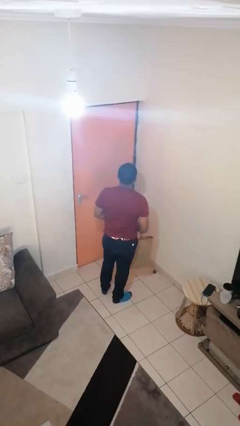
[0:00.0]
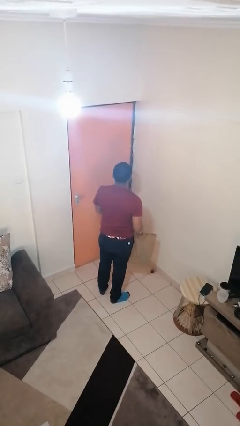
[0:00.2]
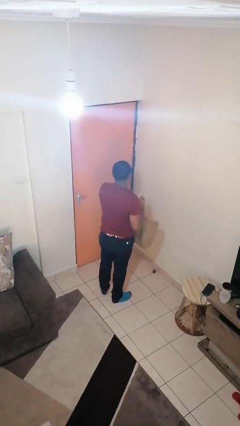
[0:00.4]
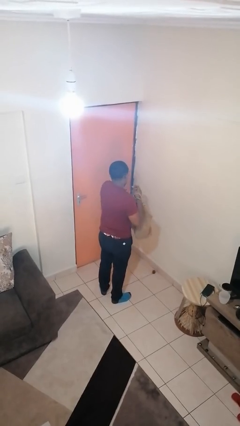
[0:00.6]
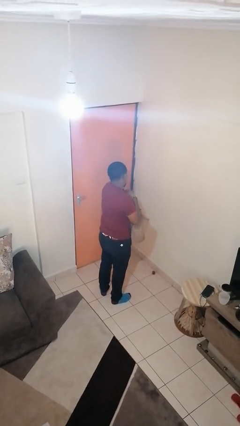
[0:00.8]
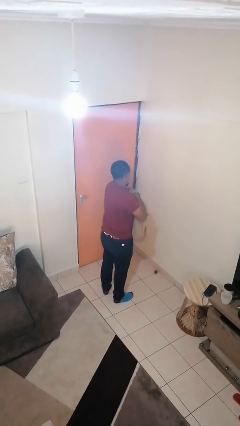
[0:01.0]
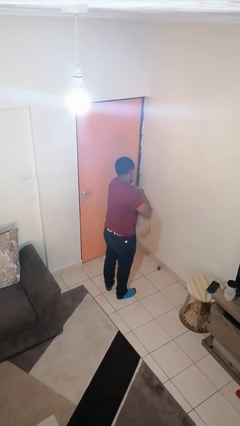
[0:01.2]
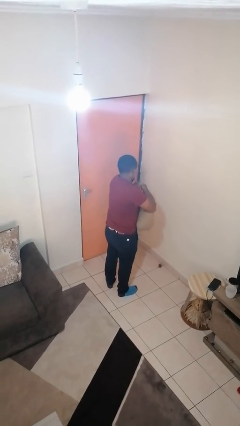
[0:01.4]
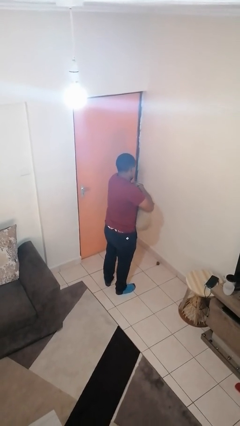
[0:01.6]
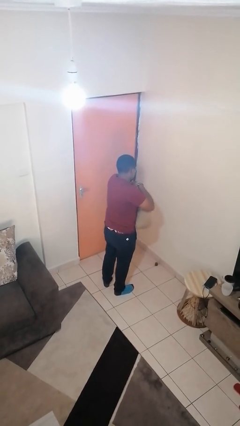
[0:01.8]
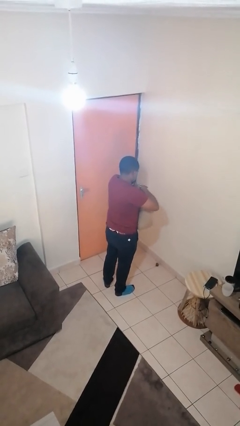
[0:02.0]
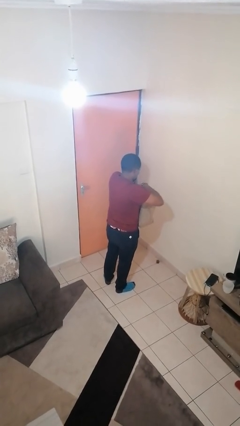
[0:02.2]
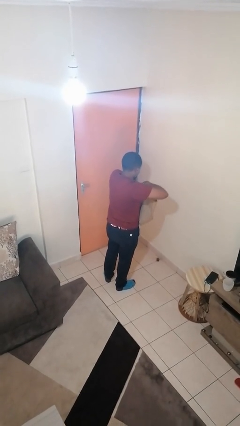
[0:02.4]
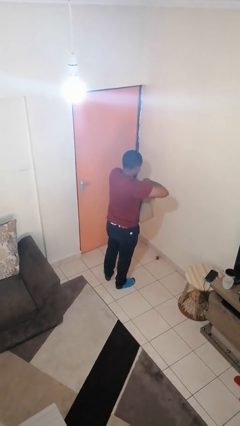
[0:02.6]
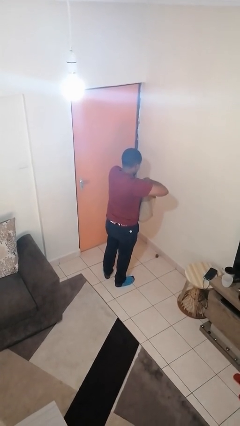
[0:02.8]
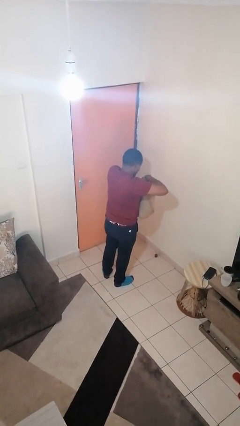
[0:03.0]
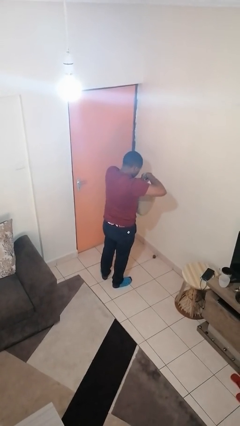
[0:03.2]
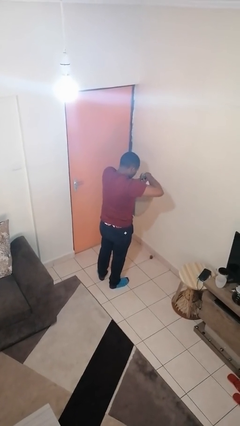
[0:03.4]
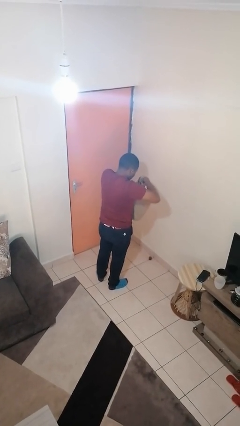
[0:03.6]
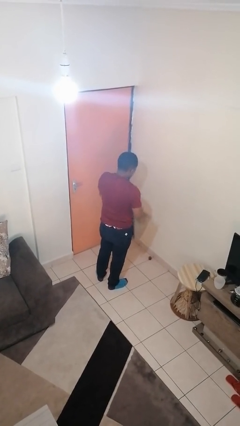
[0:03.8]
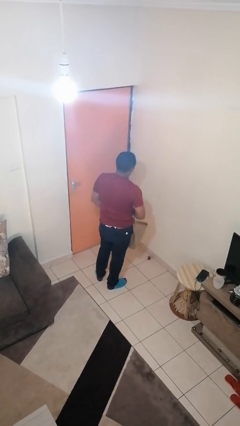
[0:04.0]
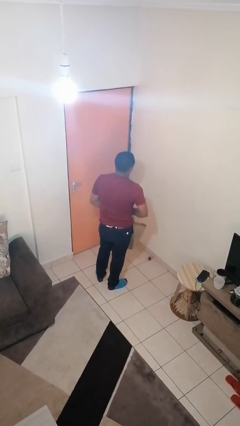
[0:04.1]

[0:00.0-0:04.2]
person searches in bag

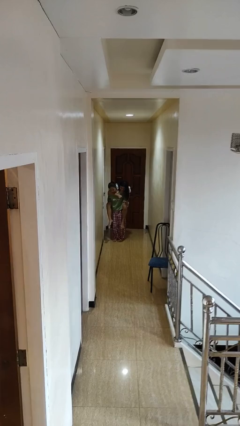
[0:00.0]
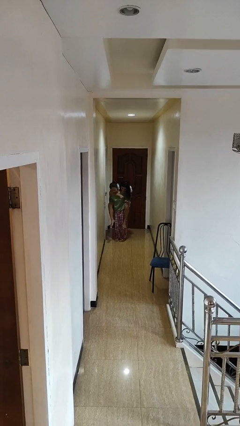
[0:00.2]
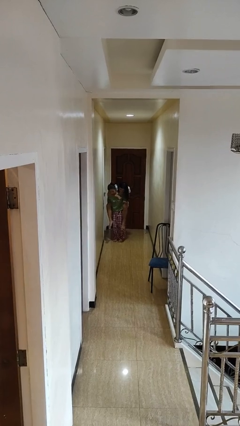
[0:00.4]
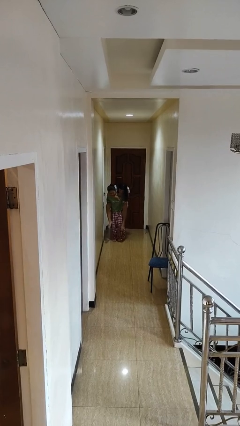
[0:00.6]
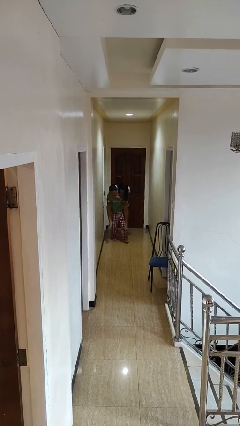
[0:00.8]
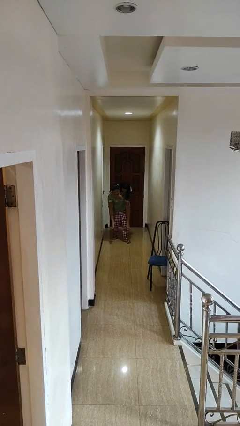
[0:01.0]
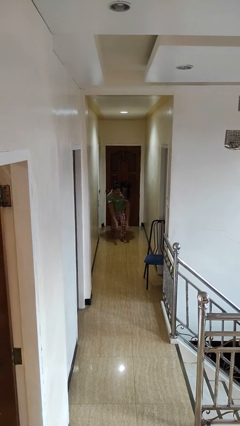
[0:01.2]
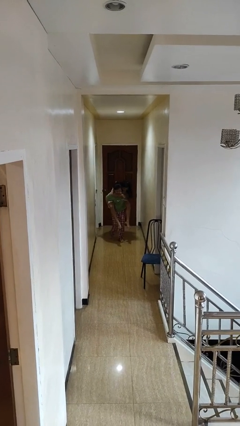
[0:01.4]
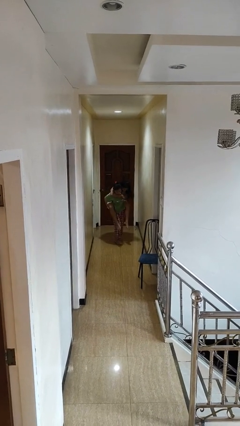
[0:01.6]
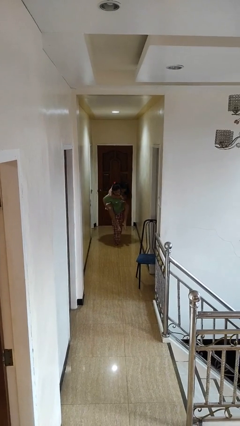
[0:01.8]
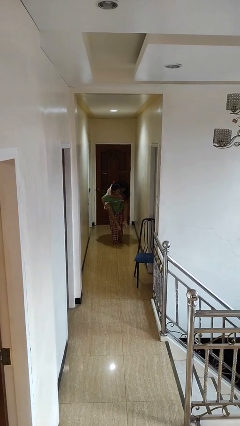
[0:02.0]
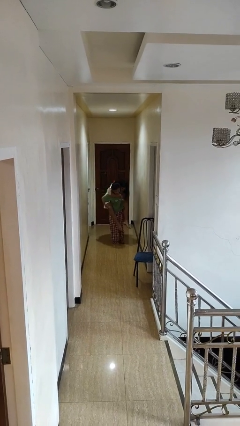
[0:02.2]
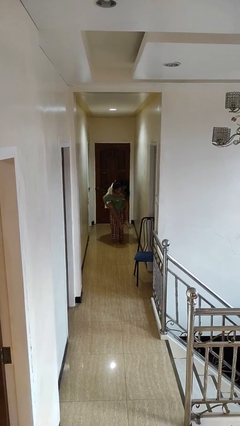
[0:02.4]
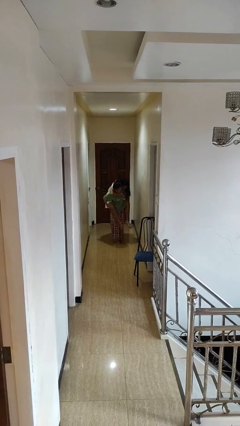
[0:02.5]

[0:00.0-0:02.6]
person carries person on back

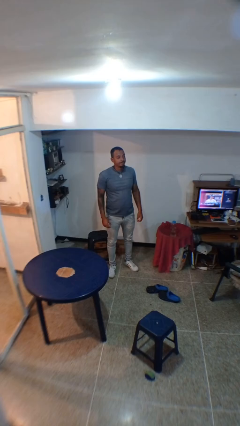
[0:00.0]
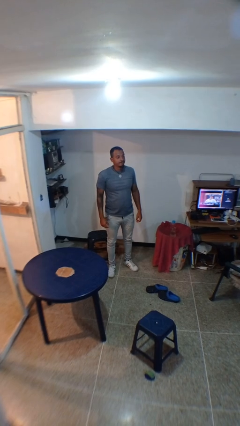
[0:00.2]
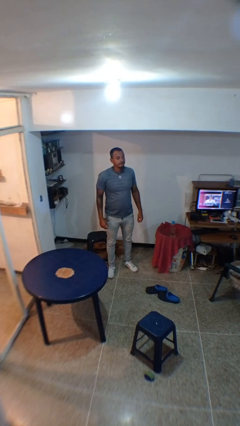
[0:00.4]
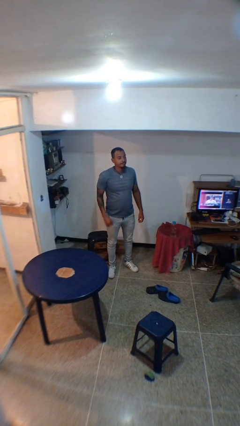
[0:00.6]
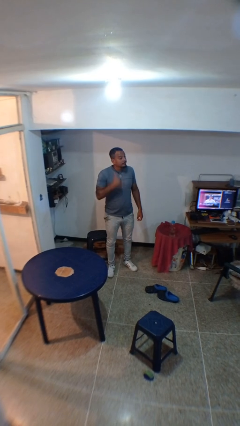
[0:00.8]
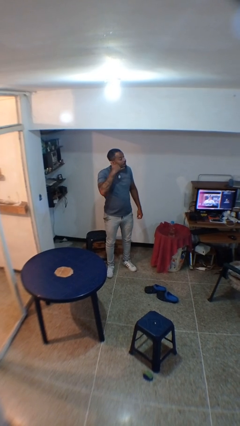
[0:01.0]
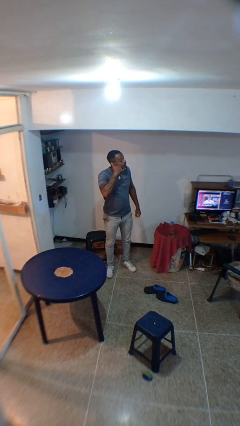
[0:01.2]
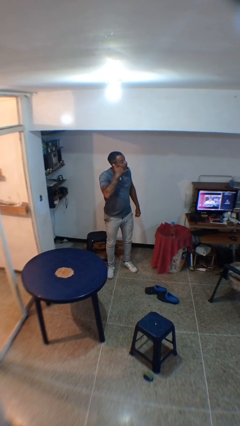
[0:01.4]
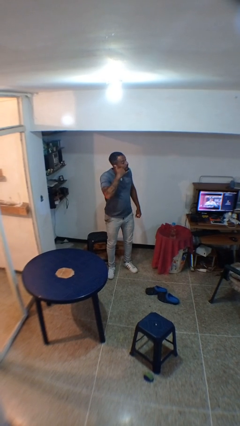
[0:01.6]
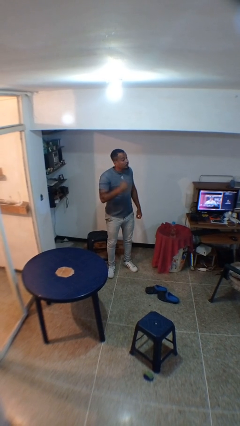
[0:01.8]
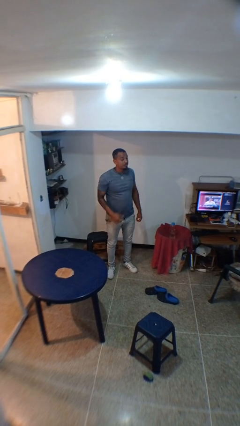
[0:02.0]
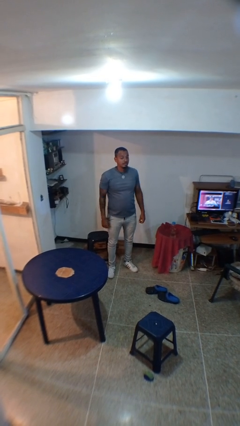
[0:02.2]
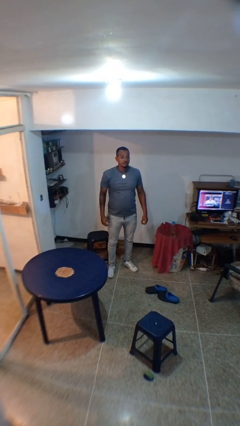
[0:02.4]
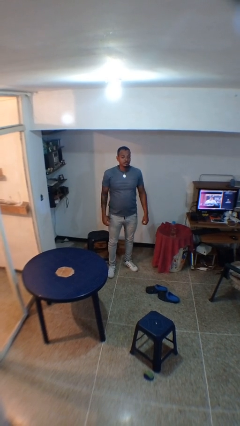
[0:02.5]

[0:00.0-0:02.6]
person gestures call me

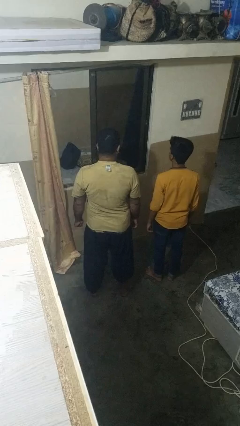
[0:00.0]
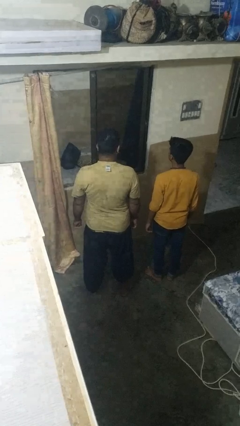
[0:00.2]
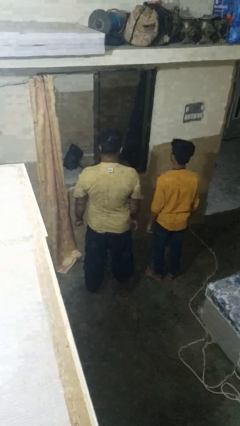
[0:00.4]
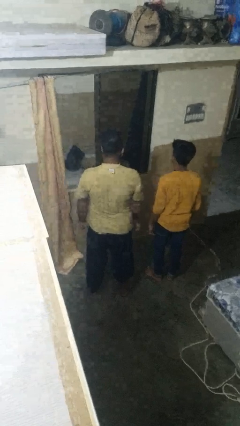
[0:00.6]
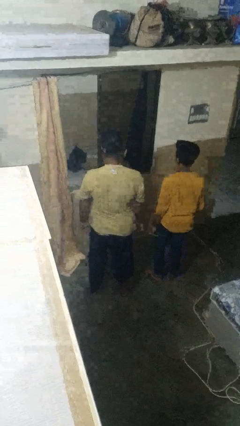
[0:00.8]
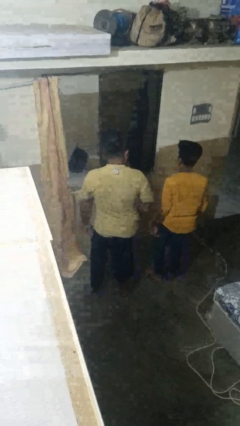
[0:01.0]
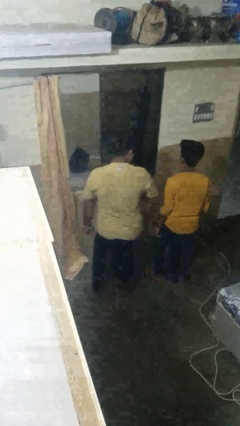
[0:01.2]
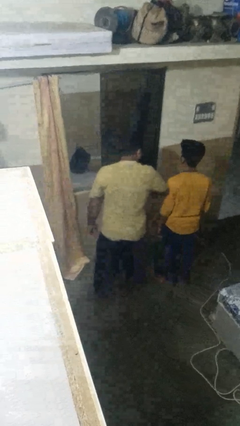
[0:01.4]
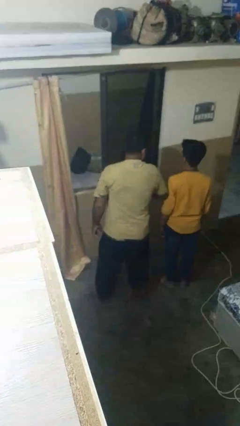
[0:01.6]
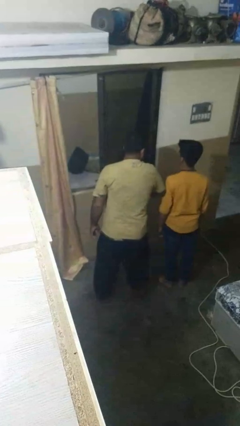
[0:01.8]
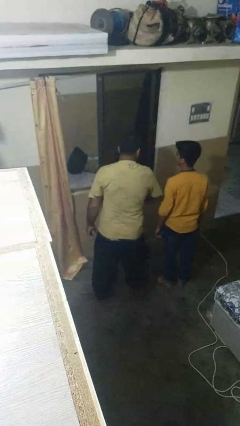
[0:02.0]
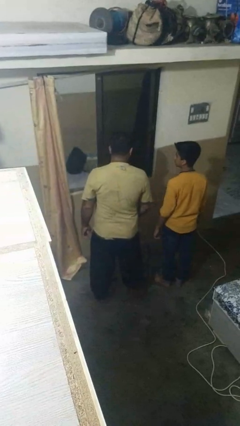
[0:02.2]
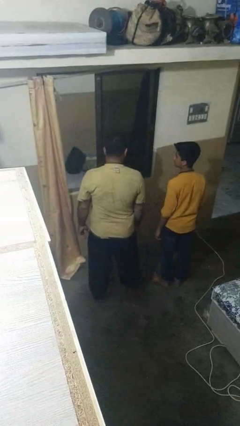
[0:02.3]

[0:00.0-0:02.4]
person nudges person with elbow

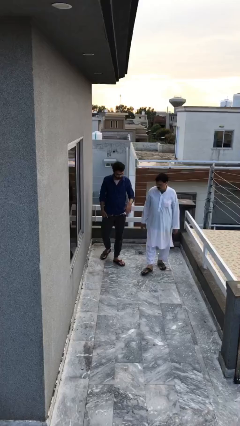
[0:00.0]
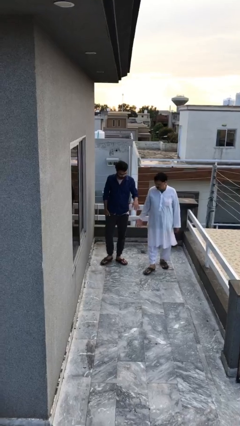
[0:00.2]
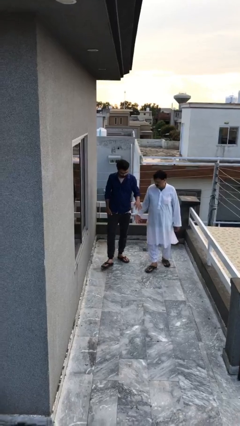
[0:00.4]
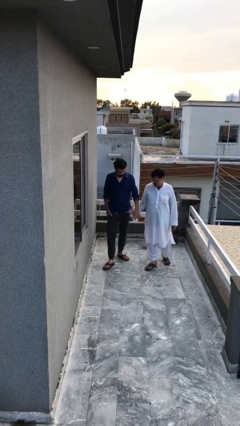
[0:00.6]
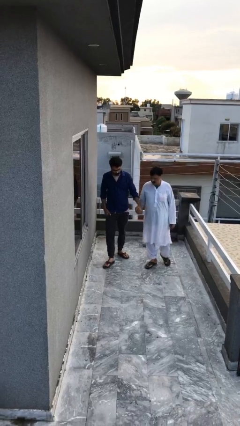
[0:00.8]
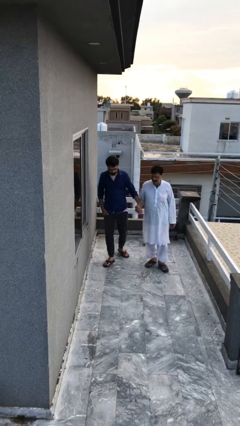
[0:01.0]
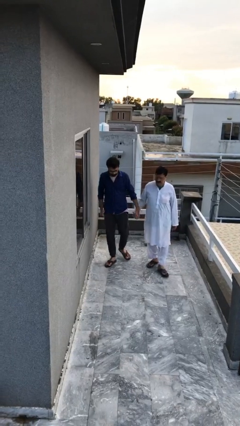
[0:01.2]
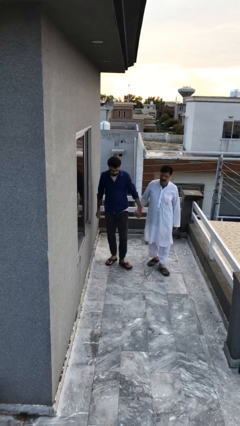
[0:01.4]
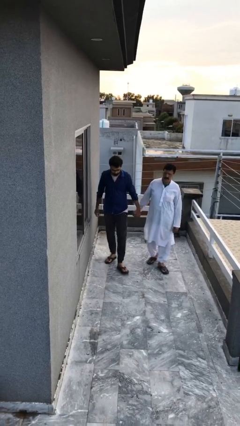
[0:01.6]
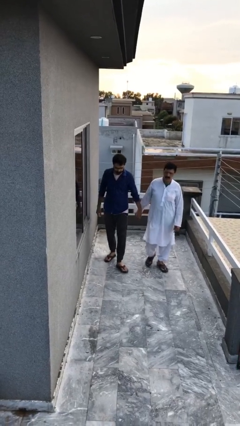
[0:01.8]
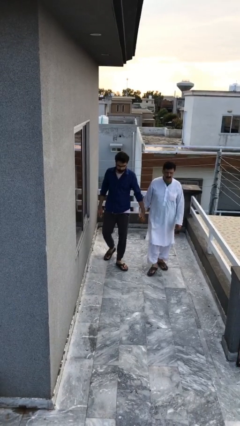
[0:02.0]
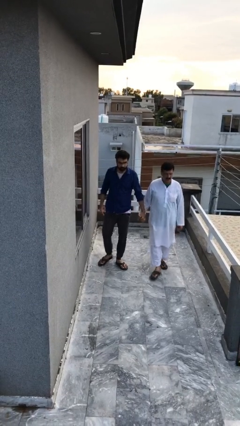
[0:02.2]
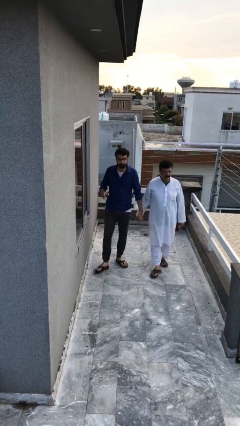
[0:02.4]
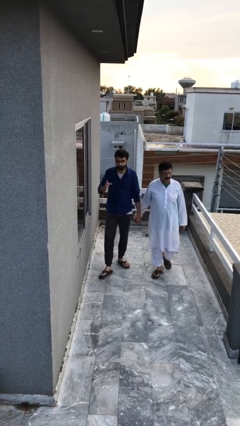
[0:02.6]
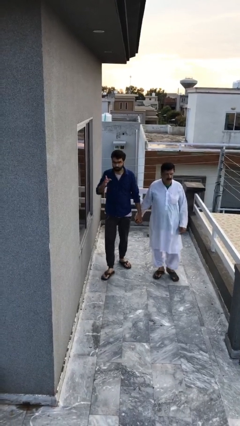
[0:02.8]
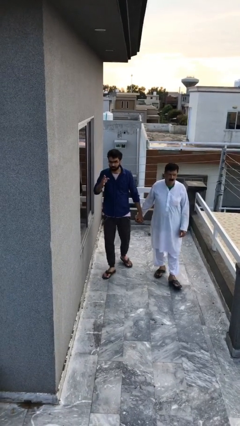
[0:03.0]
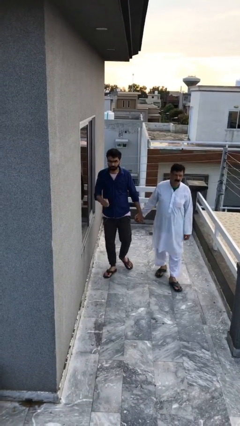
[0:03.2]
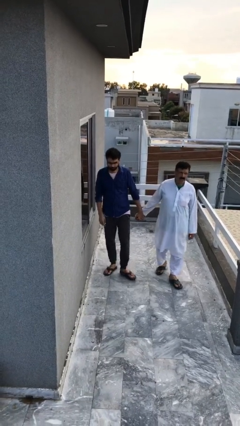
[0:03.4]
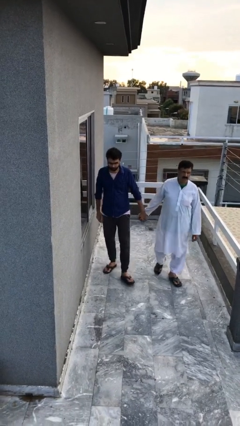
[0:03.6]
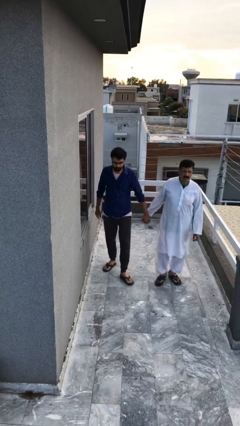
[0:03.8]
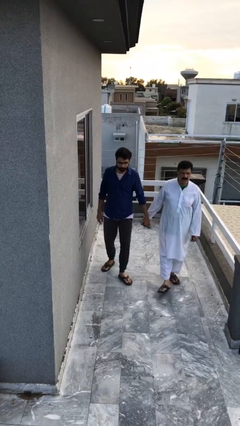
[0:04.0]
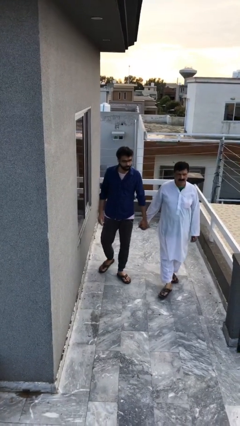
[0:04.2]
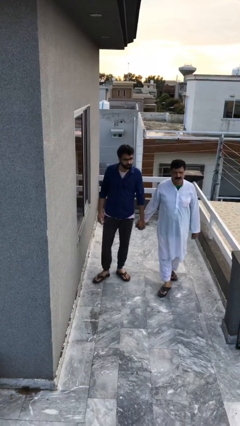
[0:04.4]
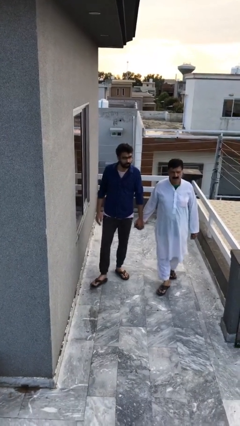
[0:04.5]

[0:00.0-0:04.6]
person holds hand

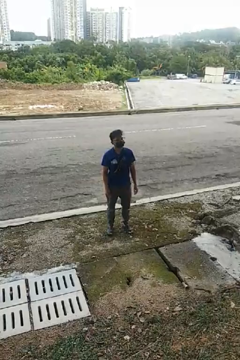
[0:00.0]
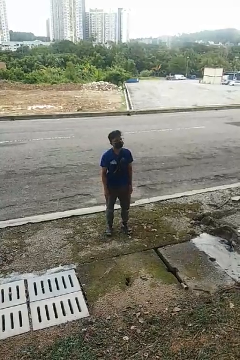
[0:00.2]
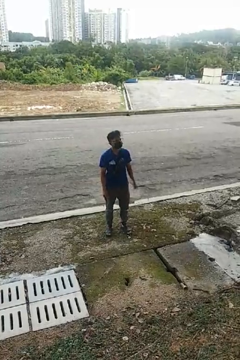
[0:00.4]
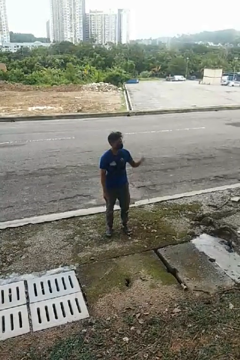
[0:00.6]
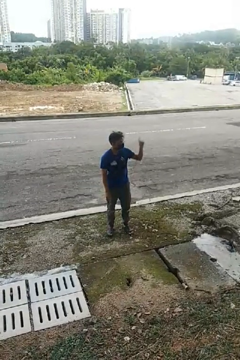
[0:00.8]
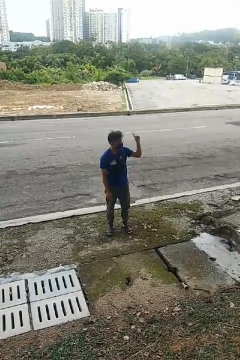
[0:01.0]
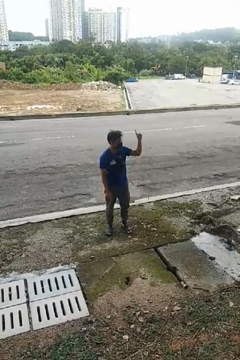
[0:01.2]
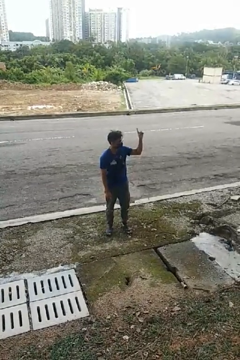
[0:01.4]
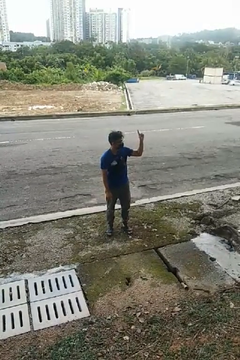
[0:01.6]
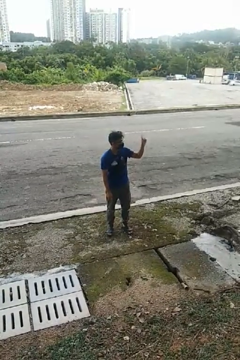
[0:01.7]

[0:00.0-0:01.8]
person gestures number one
